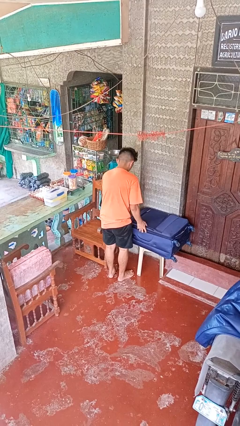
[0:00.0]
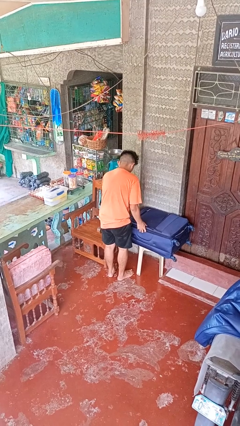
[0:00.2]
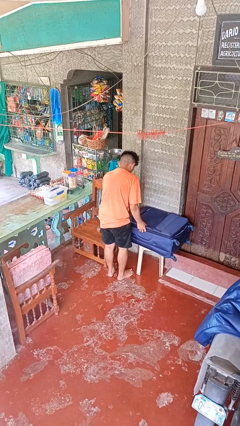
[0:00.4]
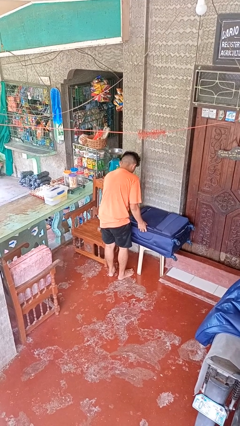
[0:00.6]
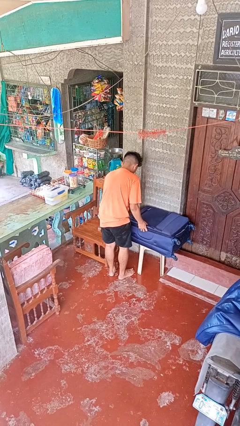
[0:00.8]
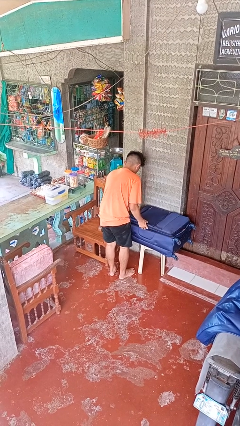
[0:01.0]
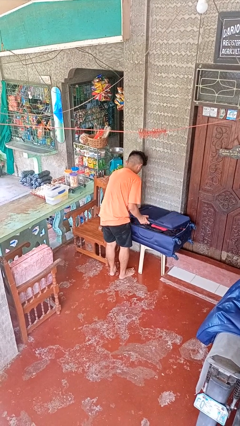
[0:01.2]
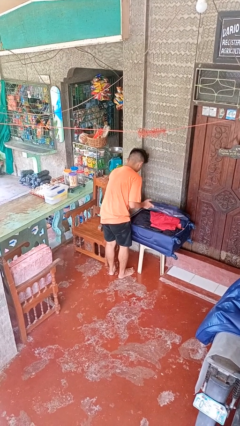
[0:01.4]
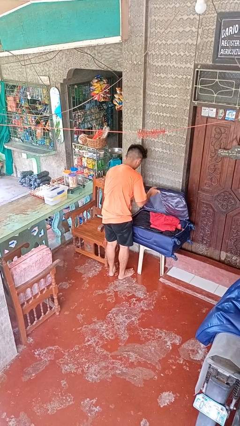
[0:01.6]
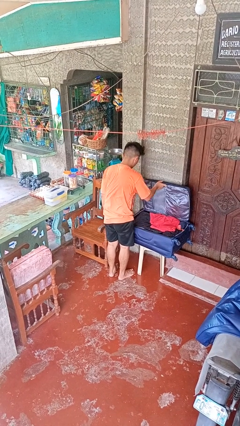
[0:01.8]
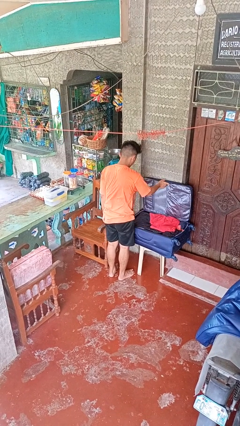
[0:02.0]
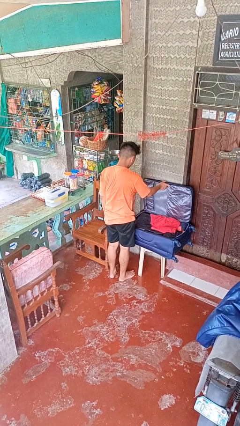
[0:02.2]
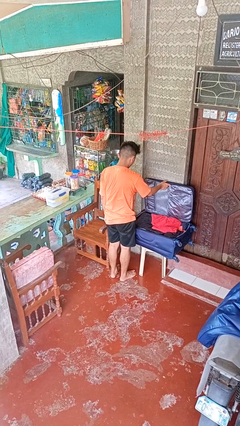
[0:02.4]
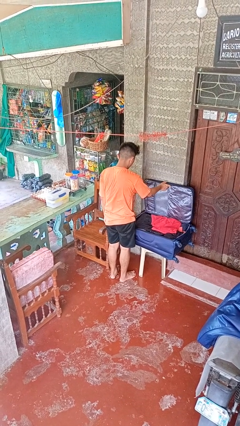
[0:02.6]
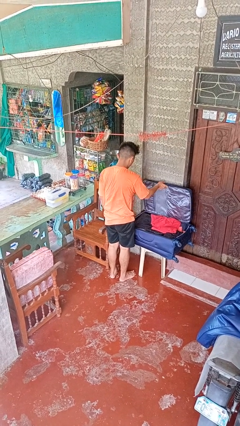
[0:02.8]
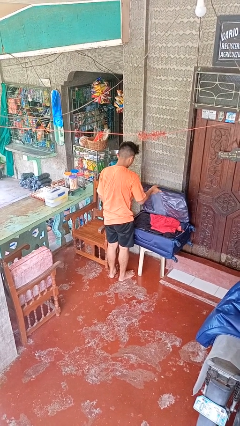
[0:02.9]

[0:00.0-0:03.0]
person opens suitcase

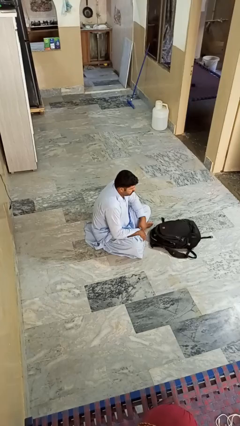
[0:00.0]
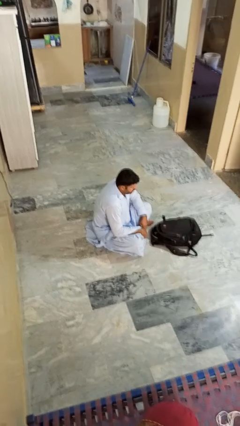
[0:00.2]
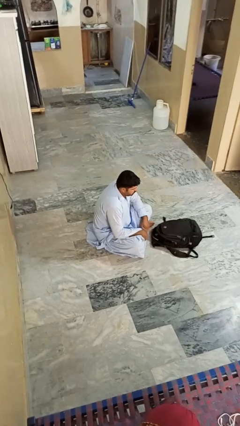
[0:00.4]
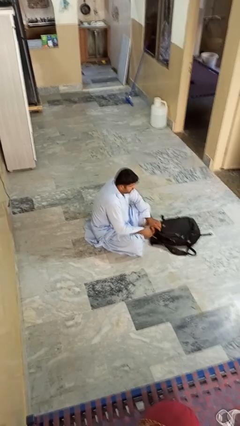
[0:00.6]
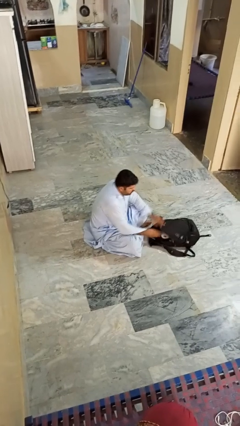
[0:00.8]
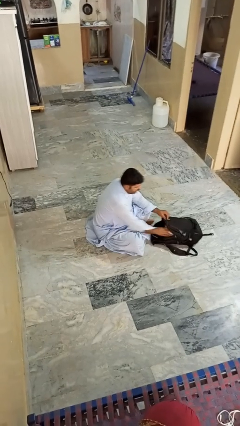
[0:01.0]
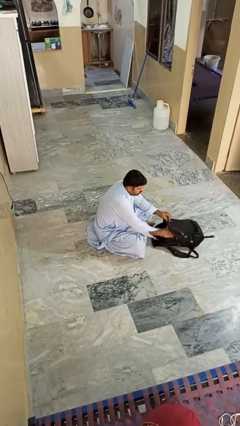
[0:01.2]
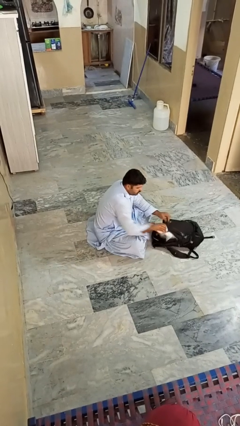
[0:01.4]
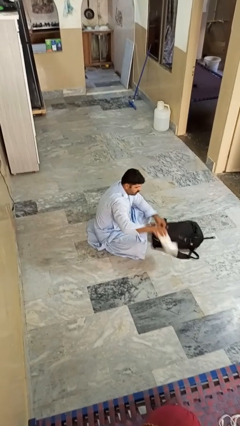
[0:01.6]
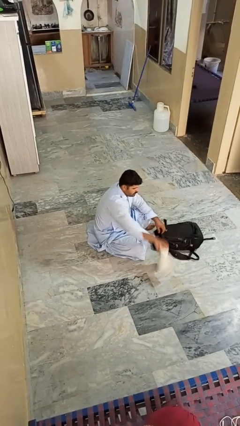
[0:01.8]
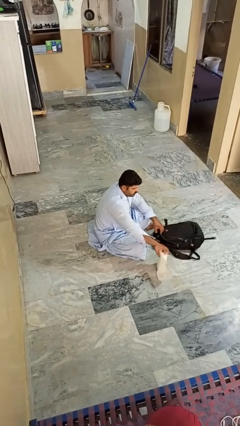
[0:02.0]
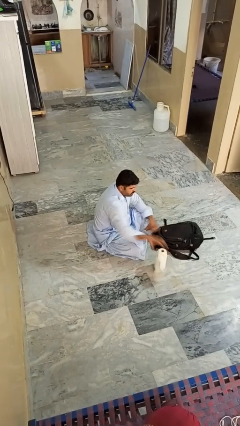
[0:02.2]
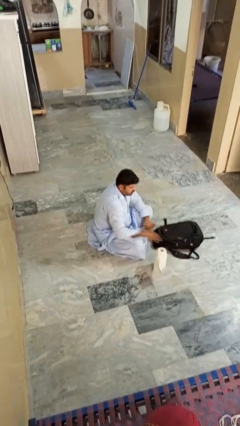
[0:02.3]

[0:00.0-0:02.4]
person takes object from bag

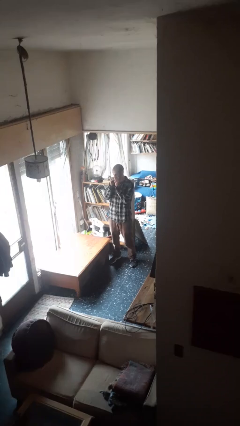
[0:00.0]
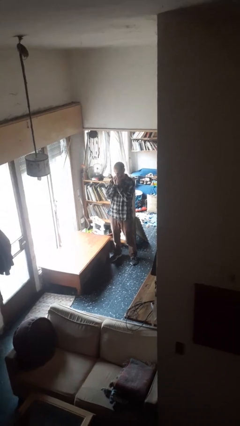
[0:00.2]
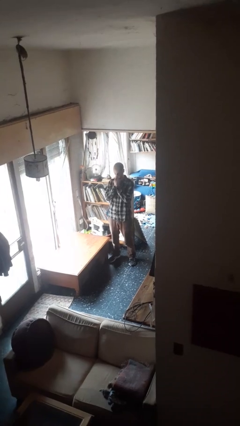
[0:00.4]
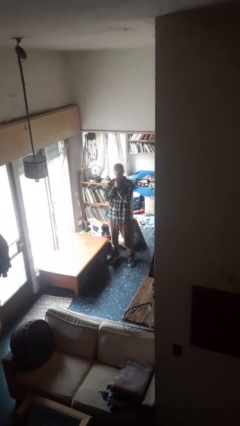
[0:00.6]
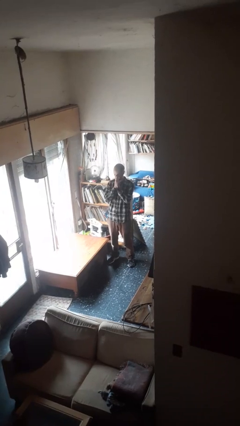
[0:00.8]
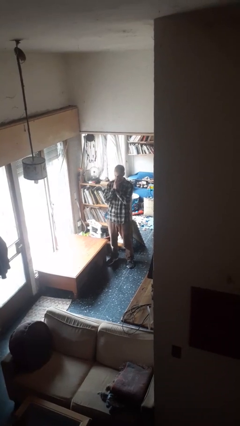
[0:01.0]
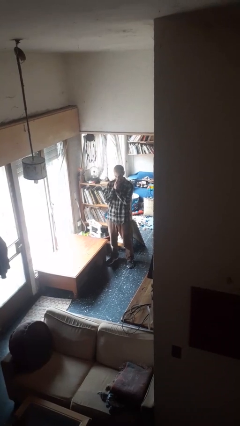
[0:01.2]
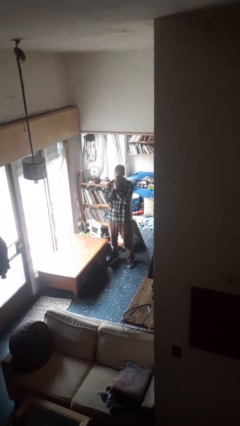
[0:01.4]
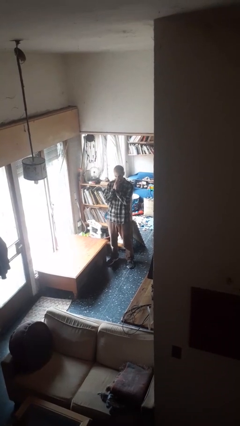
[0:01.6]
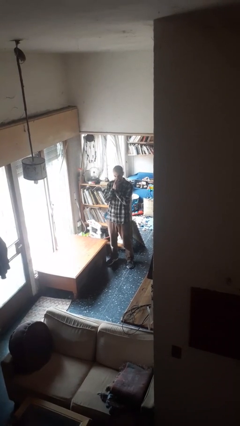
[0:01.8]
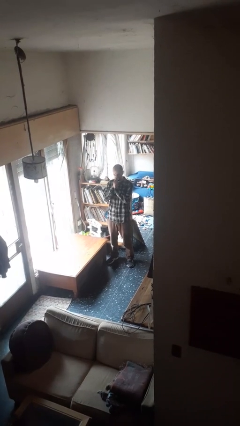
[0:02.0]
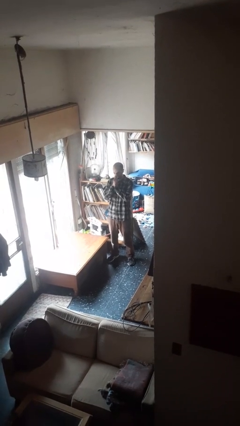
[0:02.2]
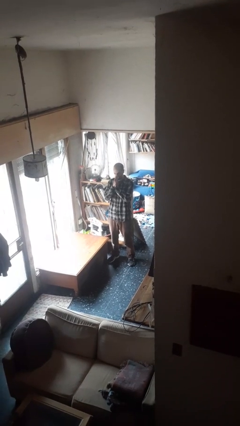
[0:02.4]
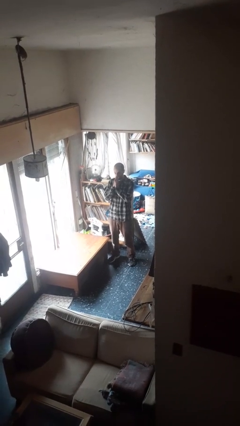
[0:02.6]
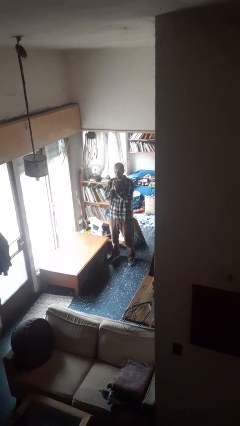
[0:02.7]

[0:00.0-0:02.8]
person blows nose

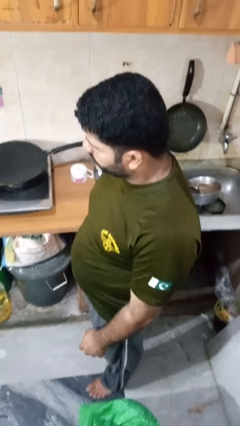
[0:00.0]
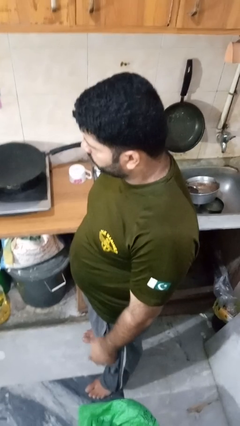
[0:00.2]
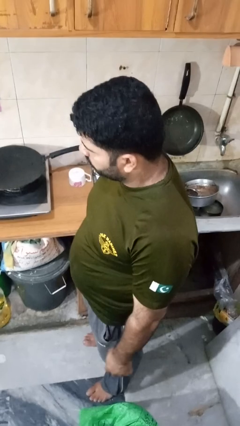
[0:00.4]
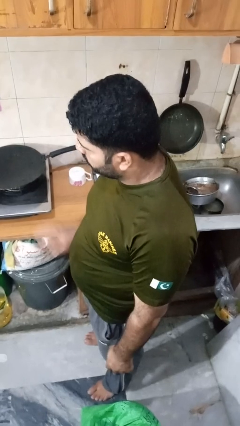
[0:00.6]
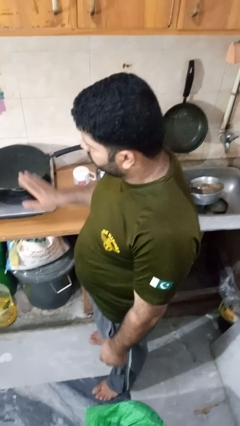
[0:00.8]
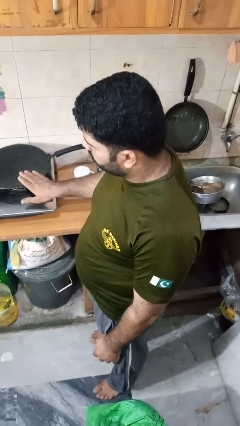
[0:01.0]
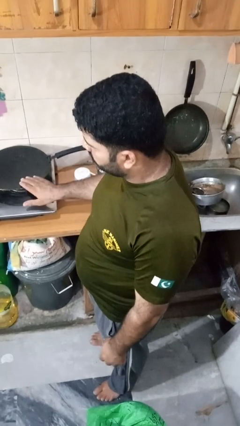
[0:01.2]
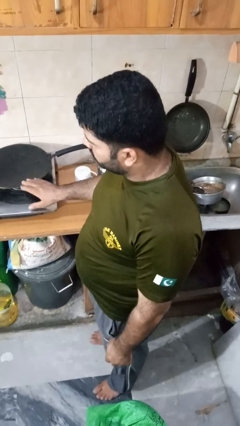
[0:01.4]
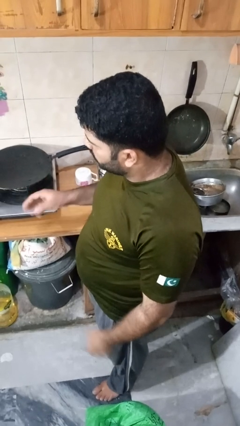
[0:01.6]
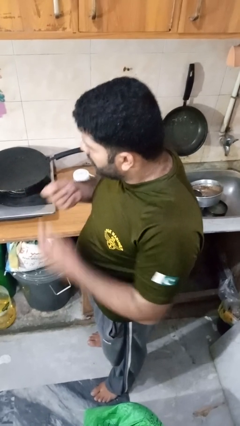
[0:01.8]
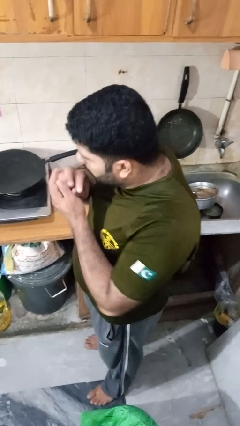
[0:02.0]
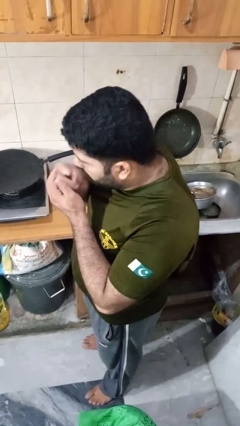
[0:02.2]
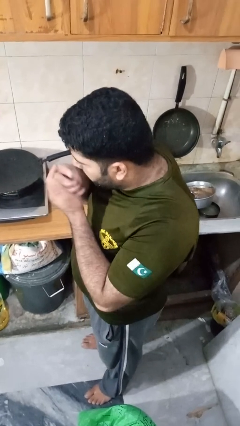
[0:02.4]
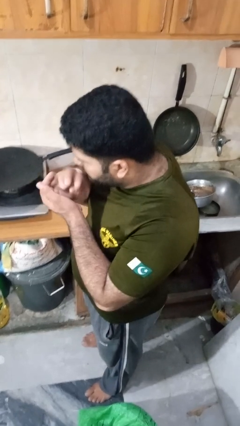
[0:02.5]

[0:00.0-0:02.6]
person burns hand

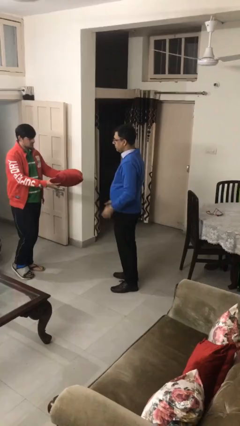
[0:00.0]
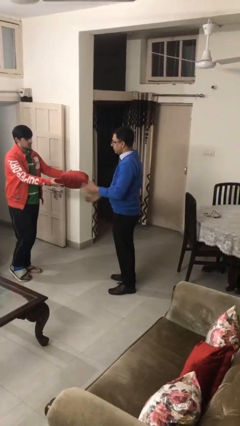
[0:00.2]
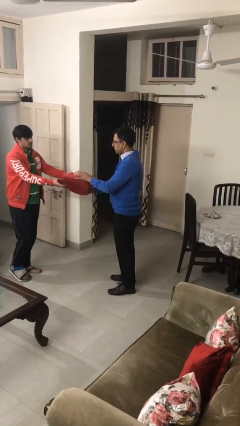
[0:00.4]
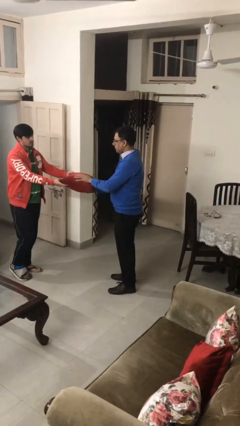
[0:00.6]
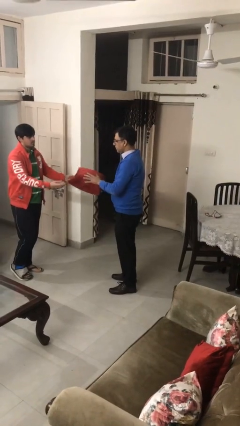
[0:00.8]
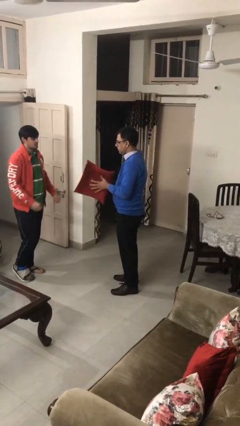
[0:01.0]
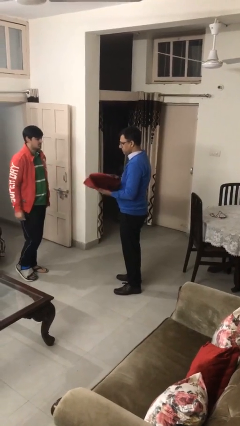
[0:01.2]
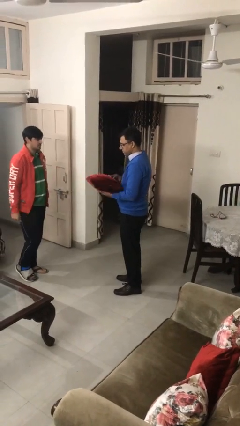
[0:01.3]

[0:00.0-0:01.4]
person transfers object to person

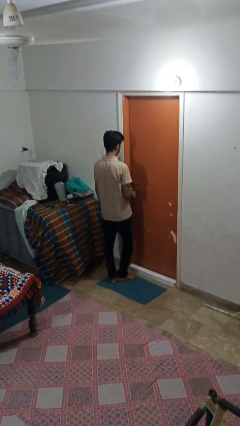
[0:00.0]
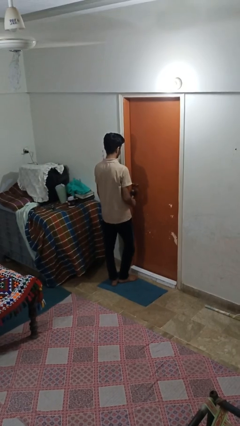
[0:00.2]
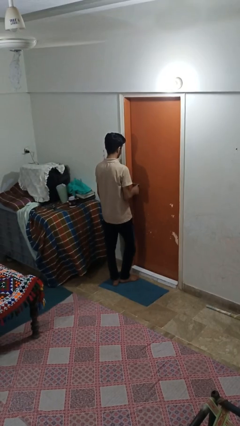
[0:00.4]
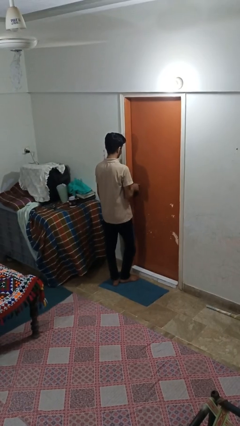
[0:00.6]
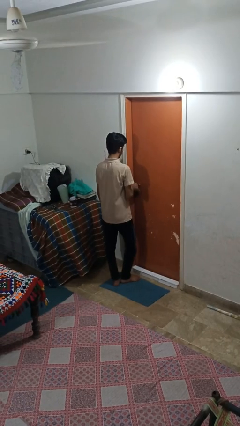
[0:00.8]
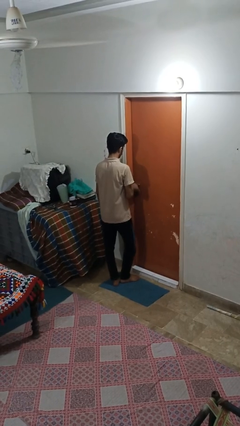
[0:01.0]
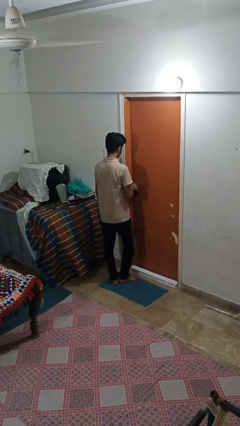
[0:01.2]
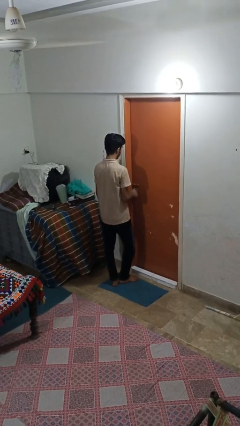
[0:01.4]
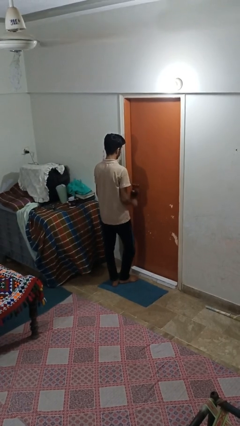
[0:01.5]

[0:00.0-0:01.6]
person locks door with keys

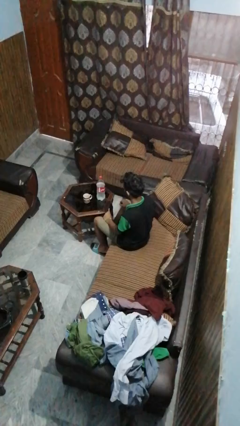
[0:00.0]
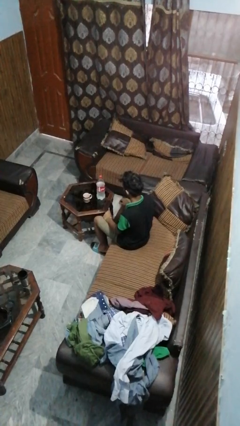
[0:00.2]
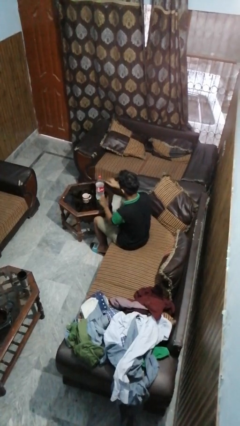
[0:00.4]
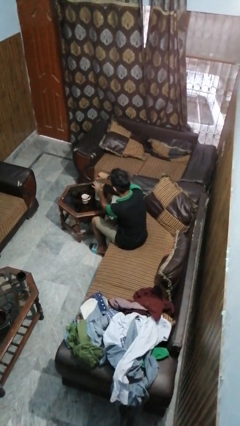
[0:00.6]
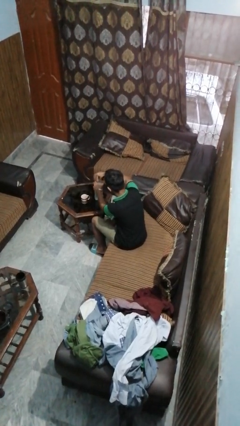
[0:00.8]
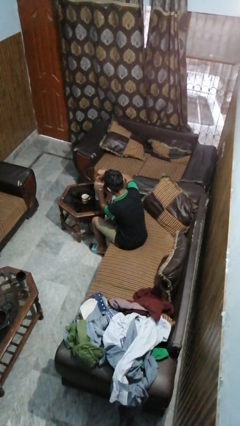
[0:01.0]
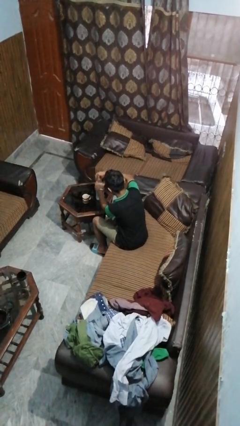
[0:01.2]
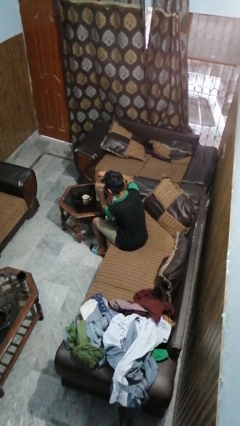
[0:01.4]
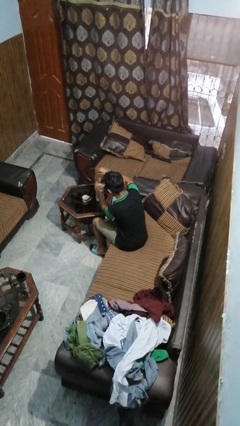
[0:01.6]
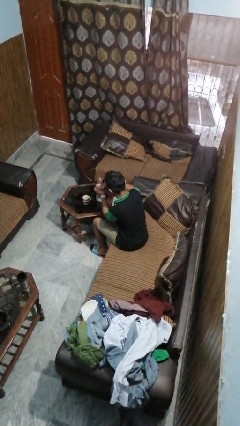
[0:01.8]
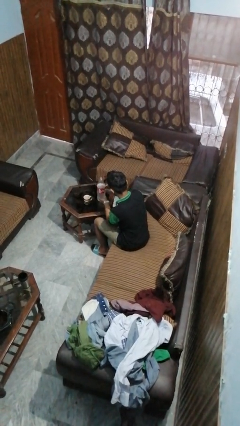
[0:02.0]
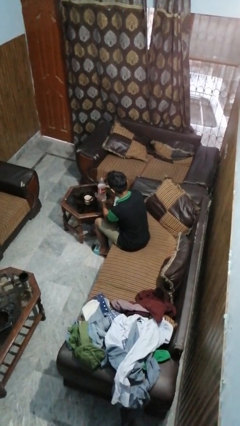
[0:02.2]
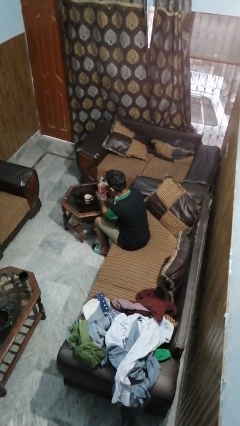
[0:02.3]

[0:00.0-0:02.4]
person unscrews lid from bottle

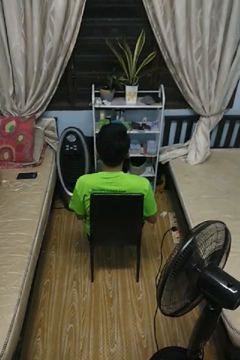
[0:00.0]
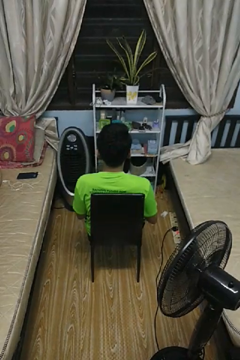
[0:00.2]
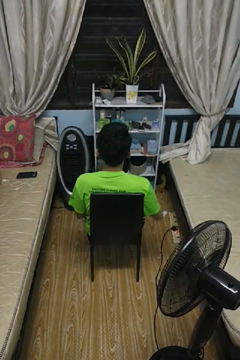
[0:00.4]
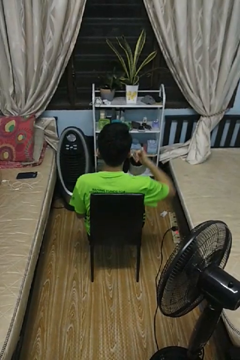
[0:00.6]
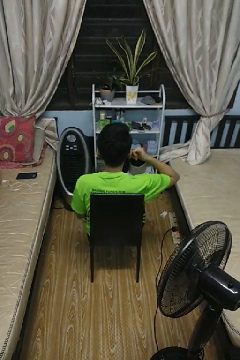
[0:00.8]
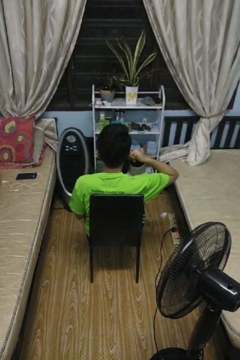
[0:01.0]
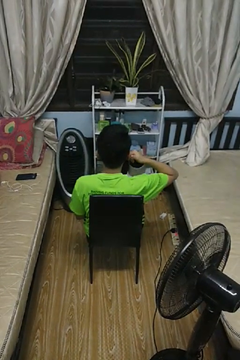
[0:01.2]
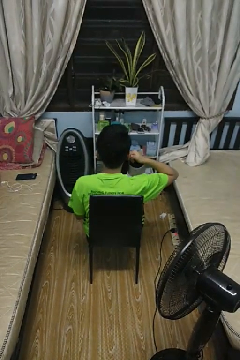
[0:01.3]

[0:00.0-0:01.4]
person gestures call me

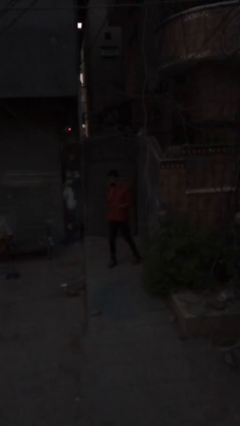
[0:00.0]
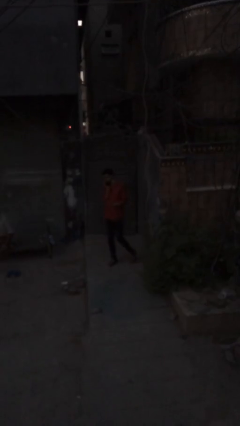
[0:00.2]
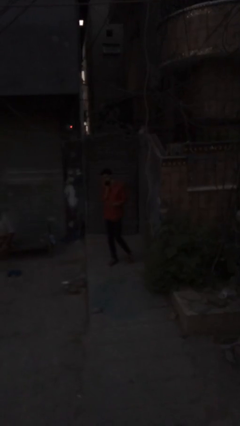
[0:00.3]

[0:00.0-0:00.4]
person closes facility door
